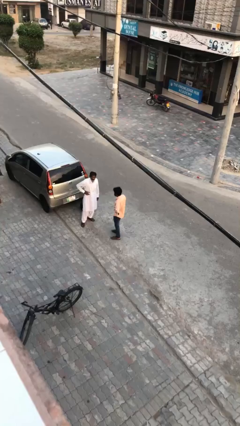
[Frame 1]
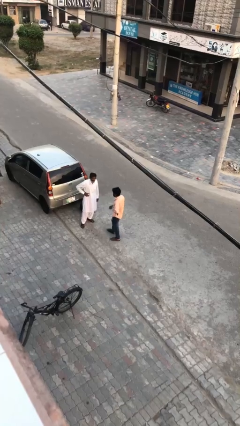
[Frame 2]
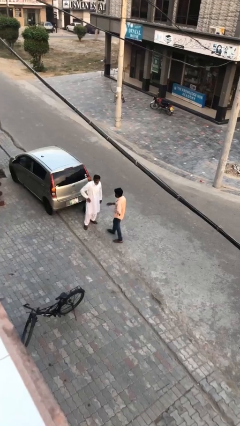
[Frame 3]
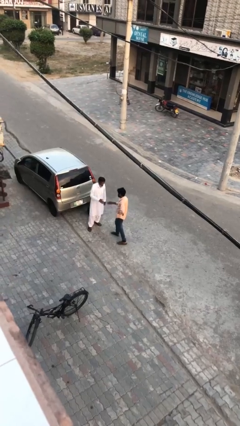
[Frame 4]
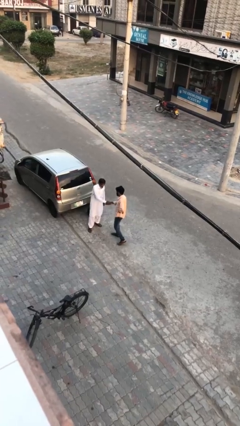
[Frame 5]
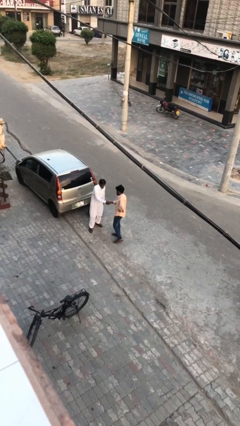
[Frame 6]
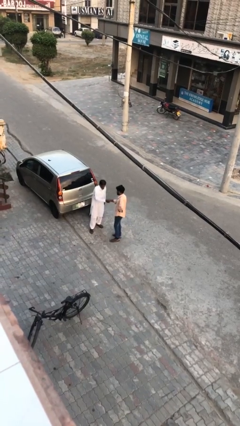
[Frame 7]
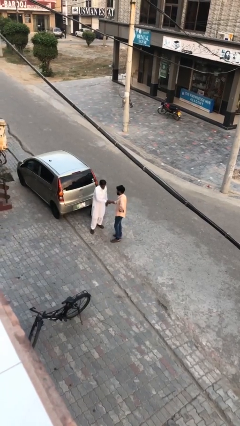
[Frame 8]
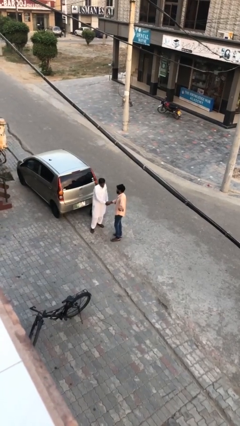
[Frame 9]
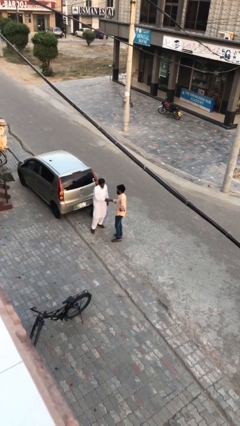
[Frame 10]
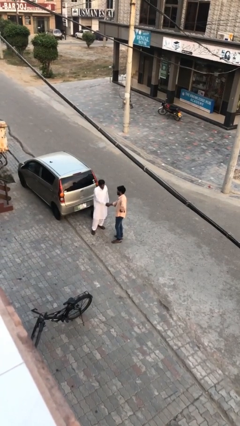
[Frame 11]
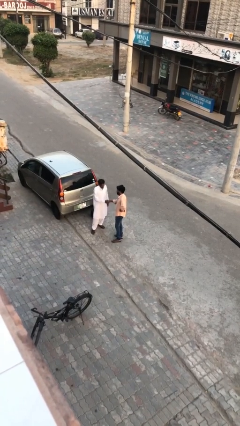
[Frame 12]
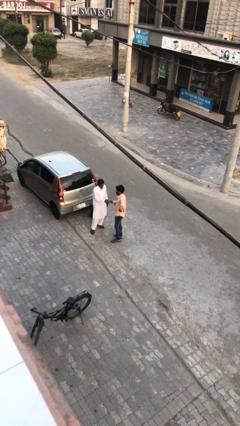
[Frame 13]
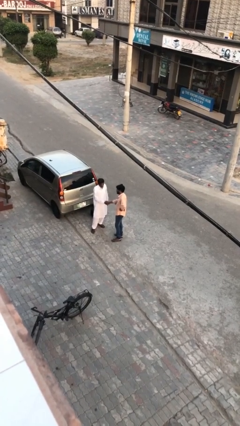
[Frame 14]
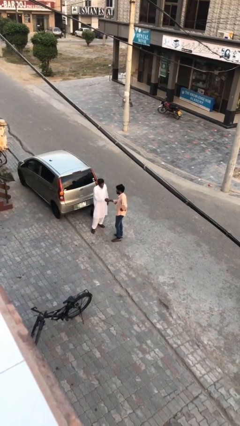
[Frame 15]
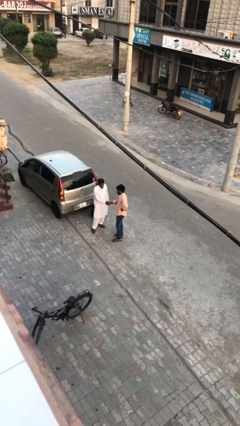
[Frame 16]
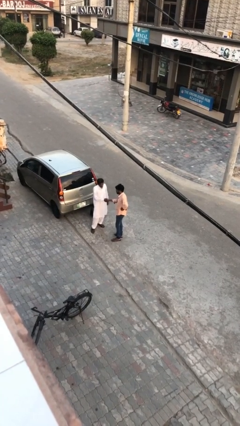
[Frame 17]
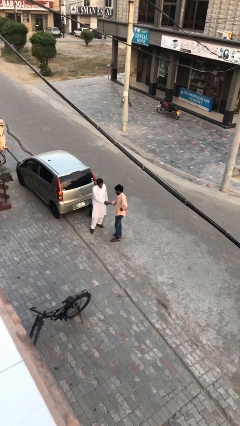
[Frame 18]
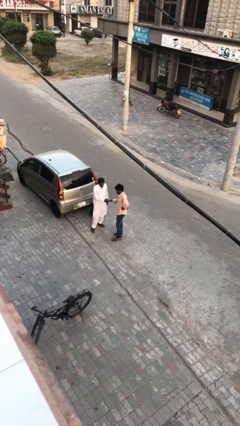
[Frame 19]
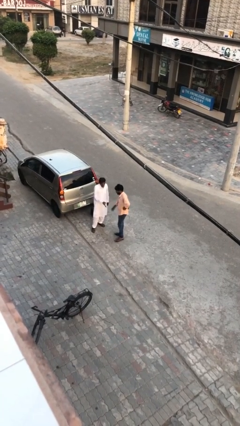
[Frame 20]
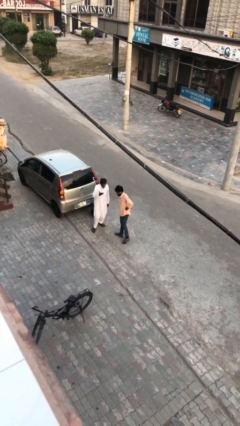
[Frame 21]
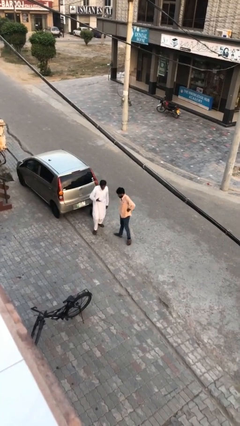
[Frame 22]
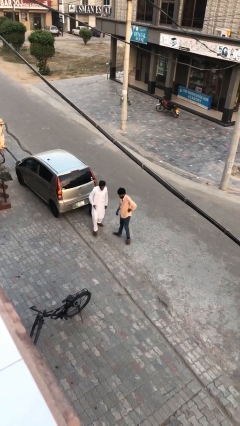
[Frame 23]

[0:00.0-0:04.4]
person shakes hand

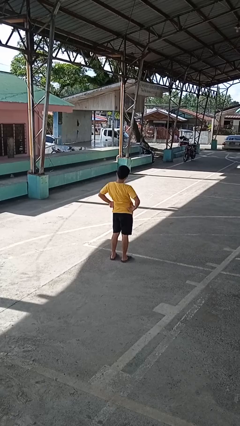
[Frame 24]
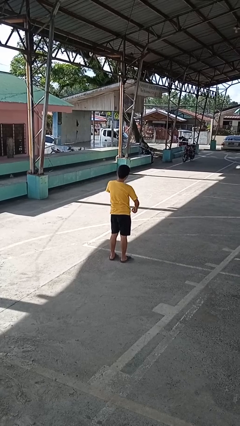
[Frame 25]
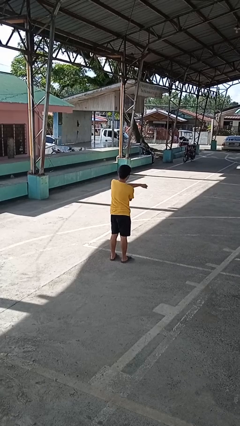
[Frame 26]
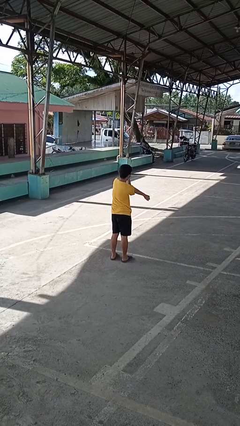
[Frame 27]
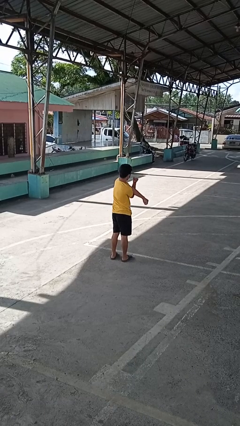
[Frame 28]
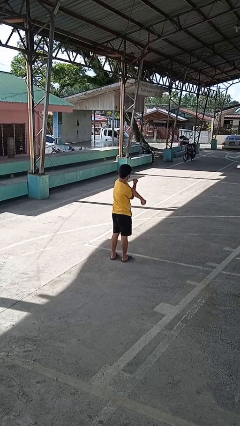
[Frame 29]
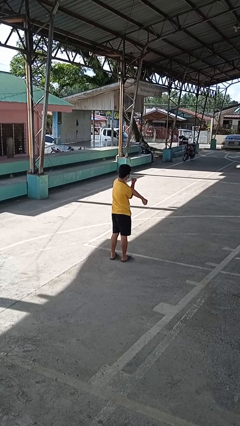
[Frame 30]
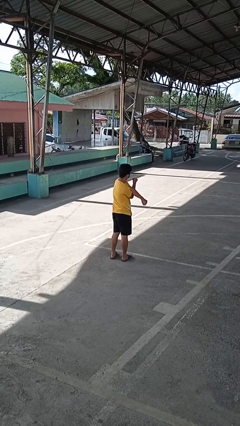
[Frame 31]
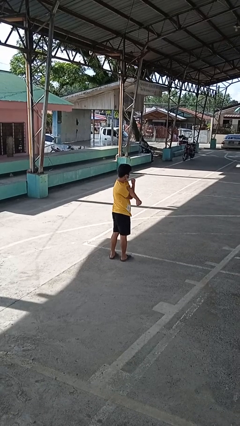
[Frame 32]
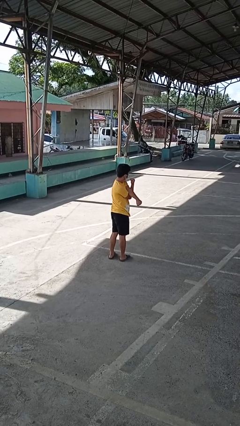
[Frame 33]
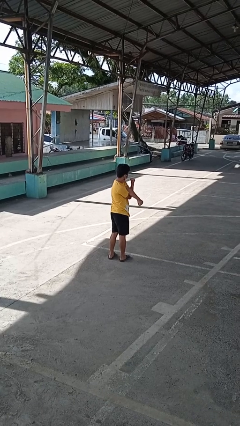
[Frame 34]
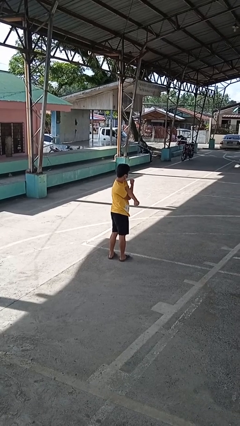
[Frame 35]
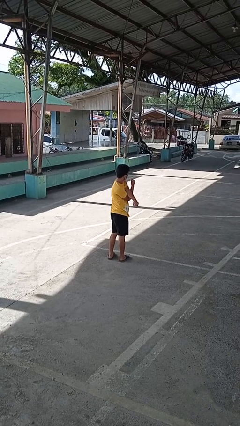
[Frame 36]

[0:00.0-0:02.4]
person stretches arms to side

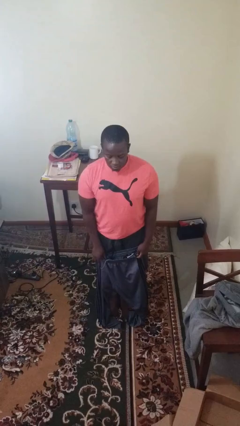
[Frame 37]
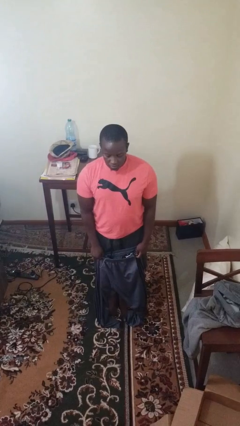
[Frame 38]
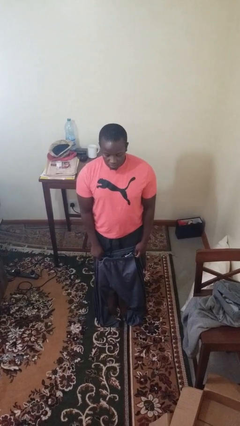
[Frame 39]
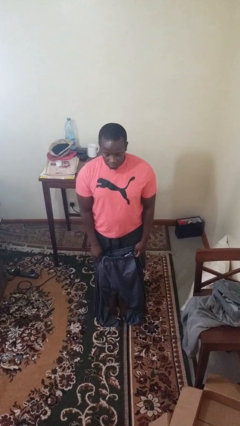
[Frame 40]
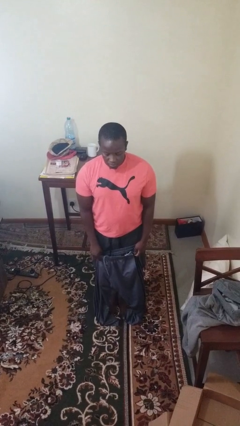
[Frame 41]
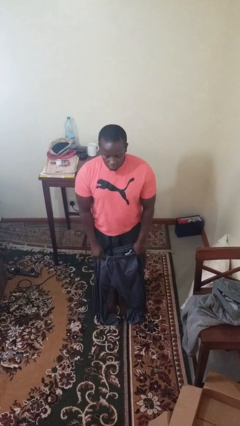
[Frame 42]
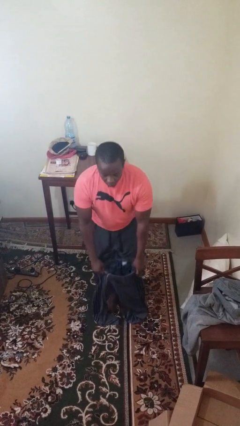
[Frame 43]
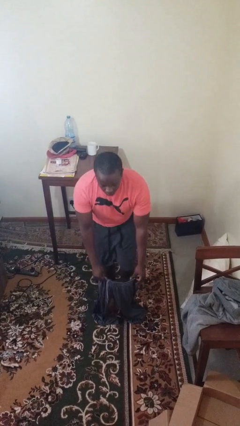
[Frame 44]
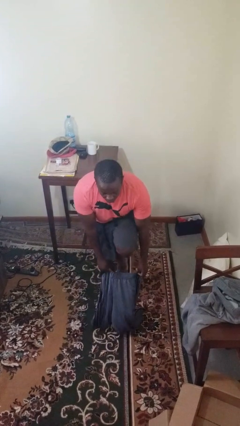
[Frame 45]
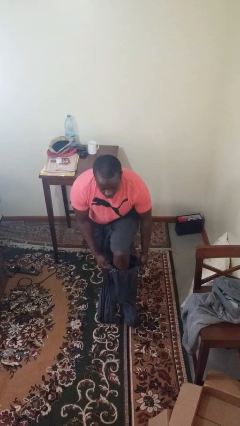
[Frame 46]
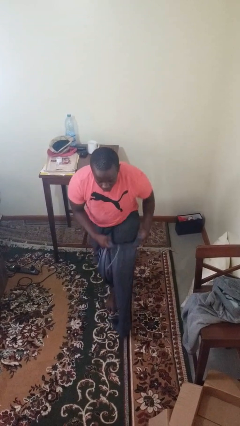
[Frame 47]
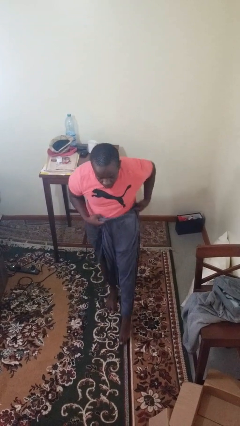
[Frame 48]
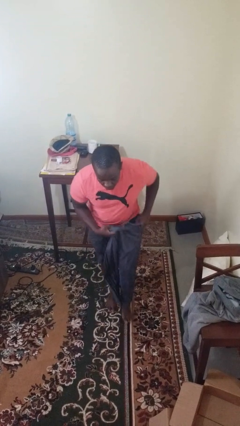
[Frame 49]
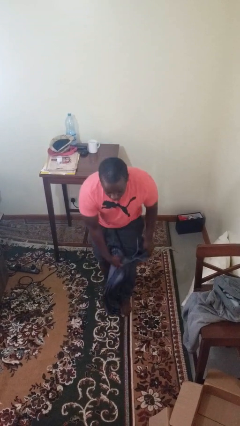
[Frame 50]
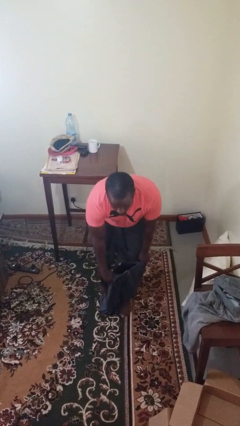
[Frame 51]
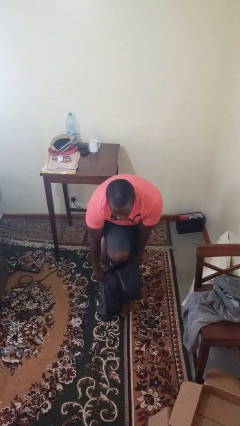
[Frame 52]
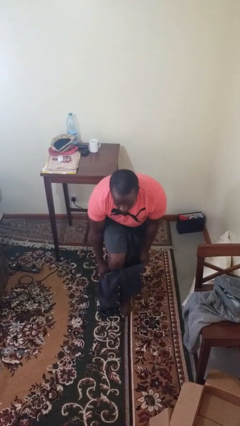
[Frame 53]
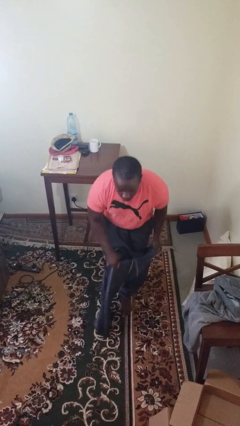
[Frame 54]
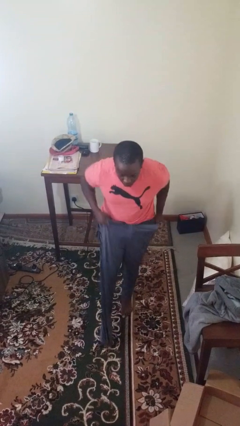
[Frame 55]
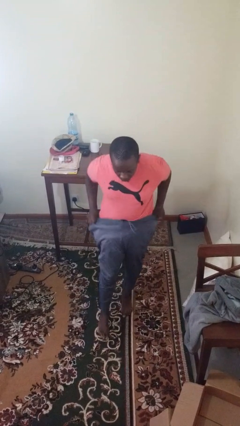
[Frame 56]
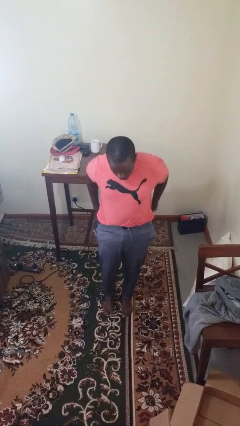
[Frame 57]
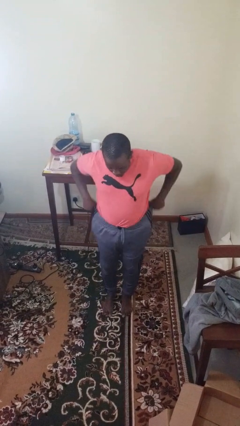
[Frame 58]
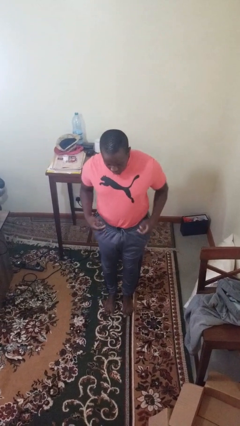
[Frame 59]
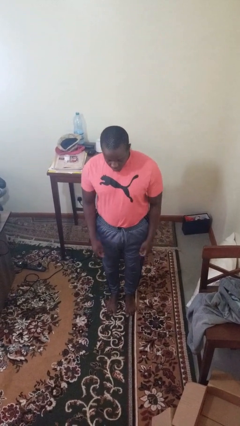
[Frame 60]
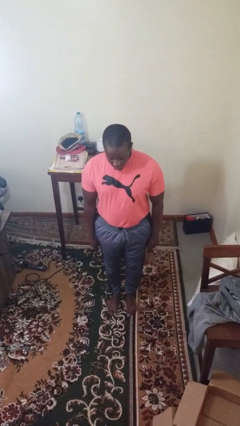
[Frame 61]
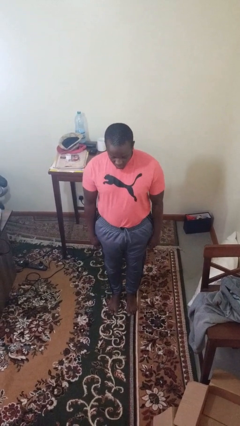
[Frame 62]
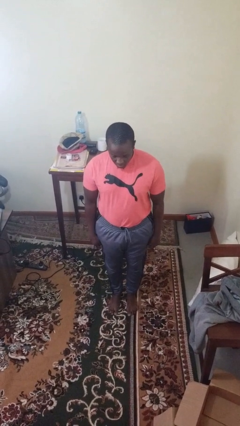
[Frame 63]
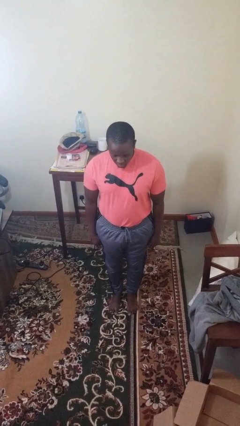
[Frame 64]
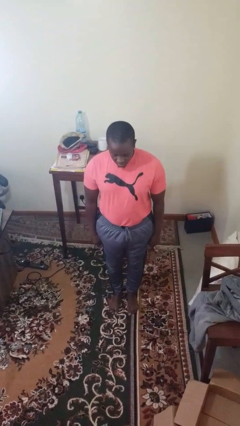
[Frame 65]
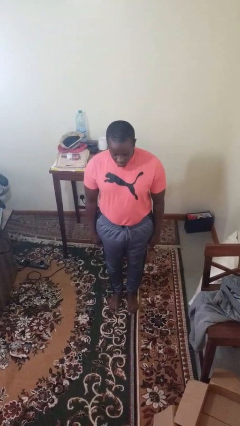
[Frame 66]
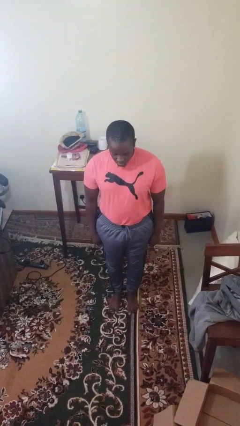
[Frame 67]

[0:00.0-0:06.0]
person puts on pants

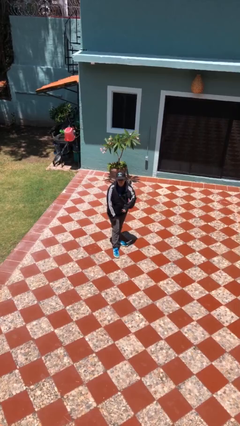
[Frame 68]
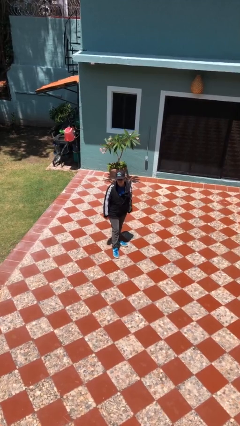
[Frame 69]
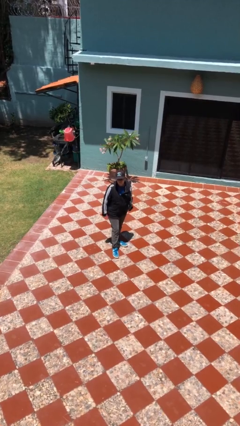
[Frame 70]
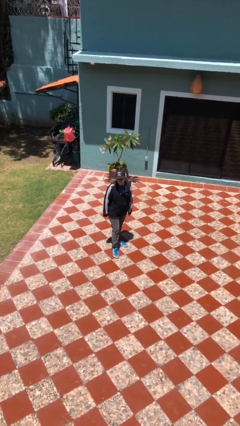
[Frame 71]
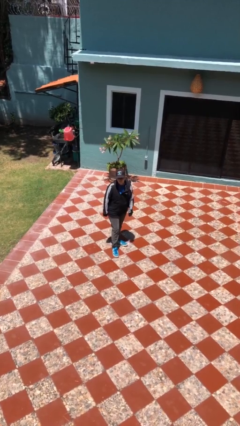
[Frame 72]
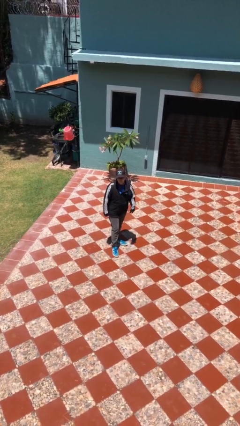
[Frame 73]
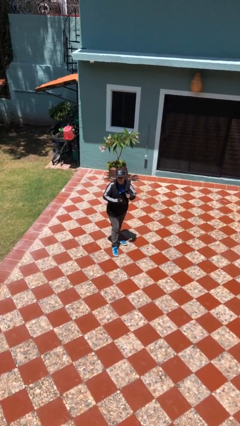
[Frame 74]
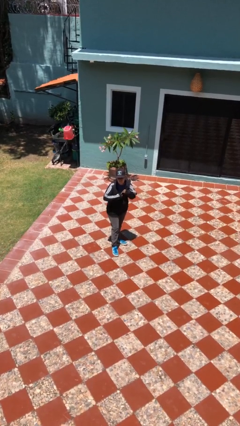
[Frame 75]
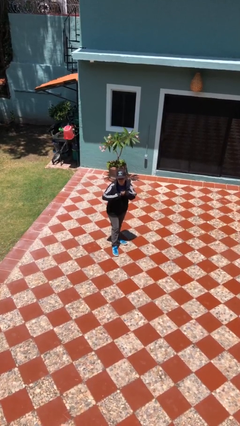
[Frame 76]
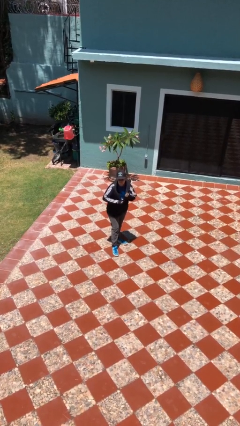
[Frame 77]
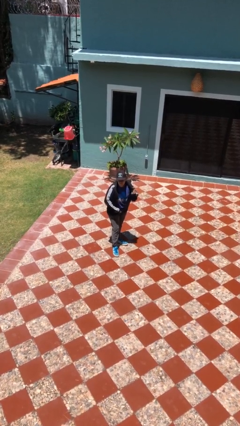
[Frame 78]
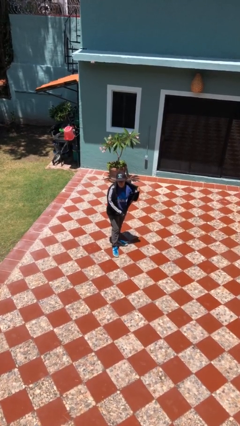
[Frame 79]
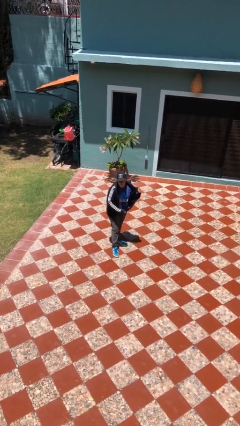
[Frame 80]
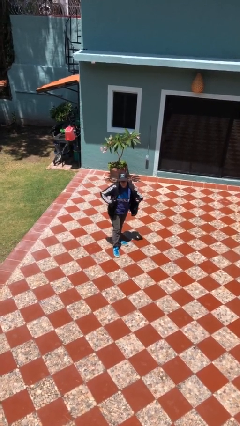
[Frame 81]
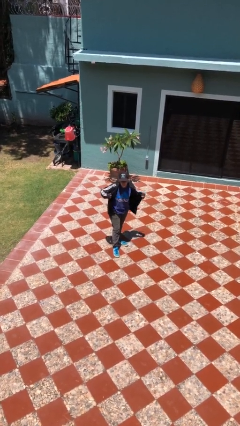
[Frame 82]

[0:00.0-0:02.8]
person unzips jacket

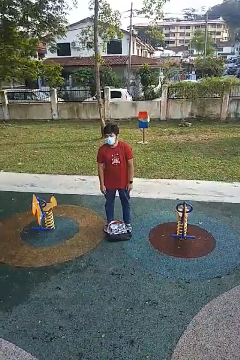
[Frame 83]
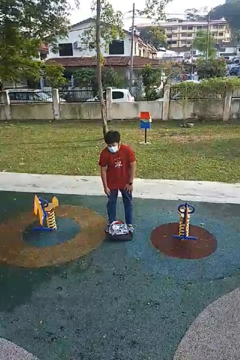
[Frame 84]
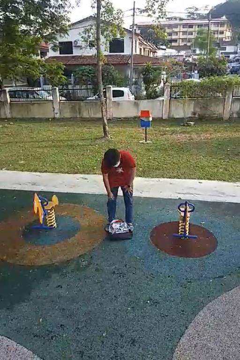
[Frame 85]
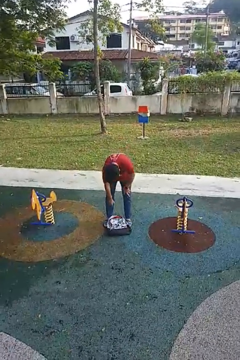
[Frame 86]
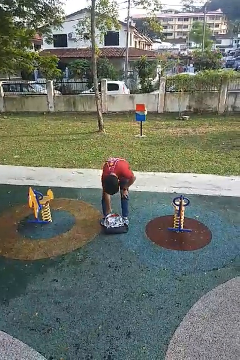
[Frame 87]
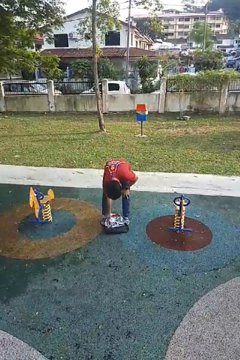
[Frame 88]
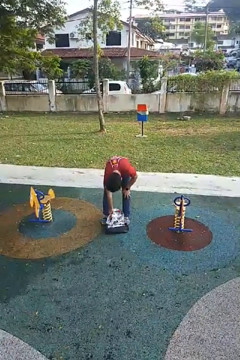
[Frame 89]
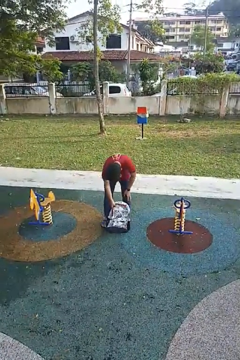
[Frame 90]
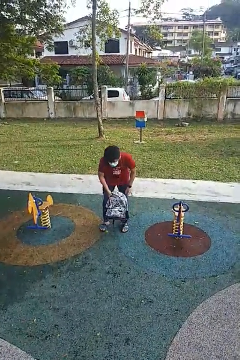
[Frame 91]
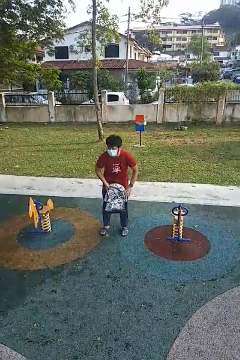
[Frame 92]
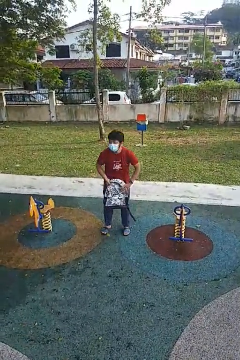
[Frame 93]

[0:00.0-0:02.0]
person picks up object from floor
